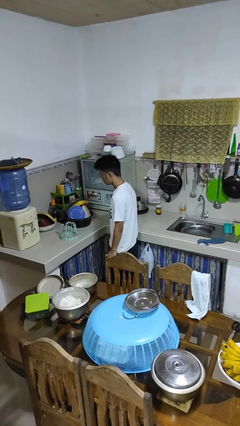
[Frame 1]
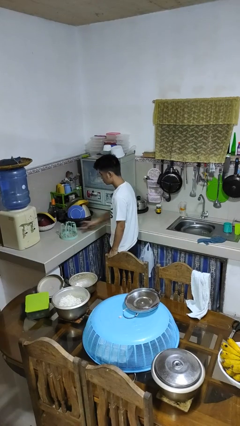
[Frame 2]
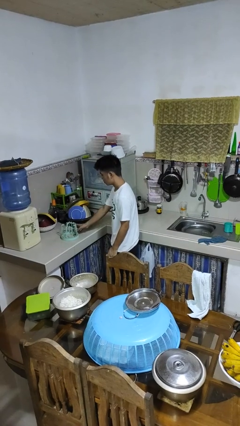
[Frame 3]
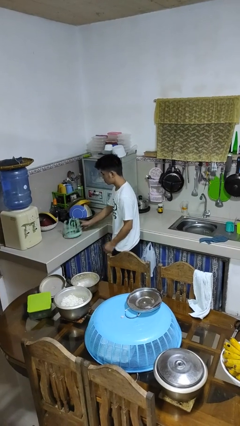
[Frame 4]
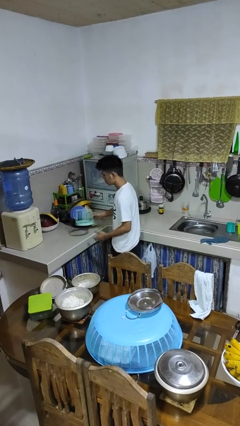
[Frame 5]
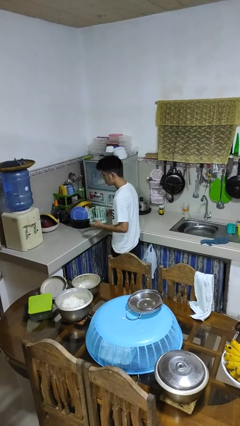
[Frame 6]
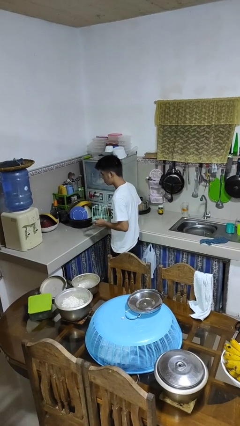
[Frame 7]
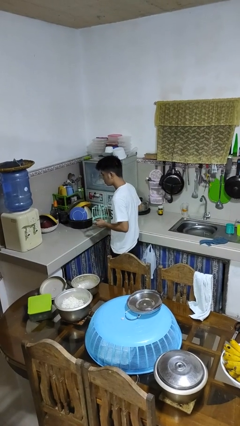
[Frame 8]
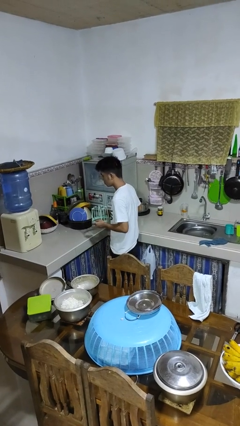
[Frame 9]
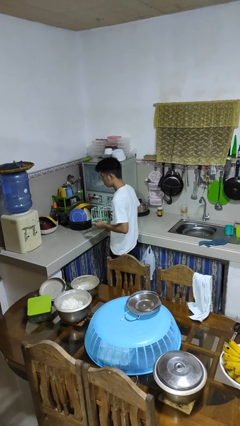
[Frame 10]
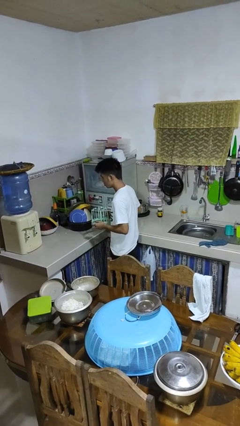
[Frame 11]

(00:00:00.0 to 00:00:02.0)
person picks up object from countertop

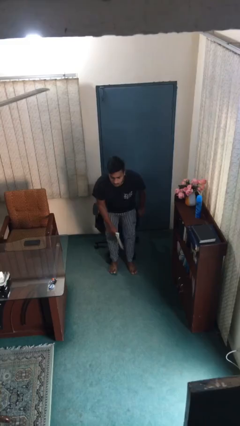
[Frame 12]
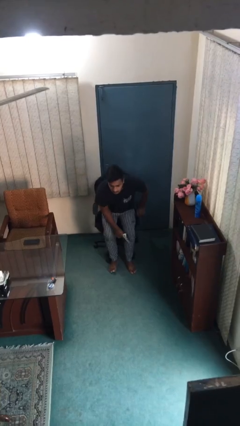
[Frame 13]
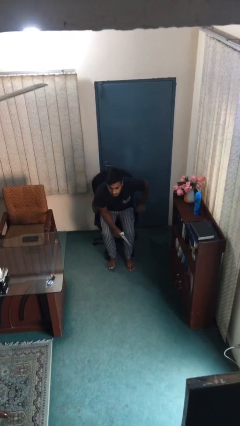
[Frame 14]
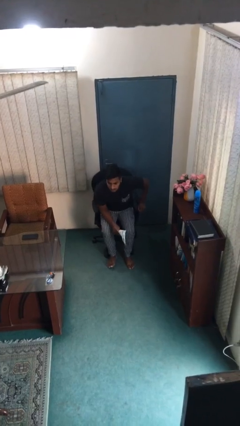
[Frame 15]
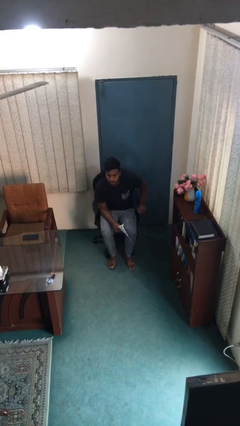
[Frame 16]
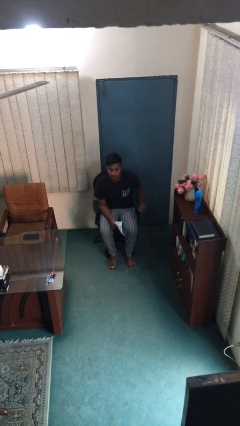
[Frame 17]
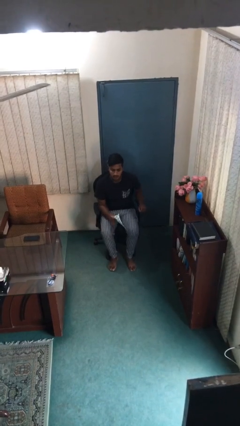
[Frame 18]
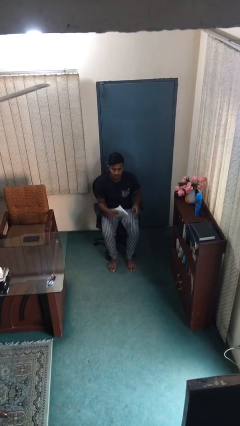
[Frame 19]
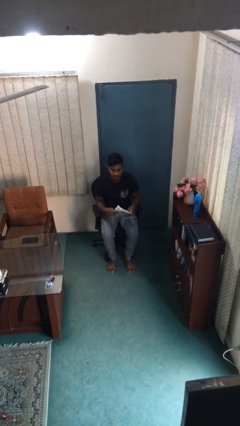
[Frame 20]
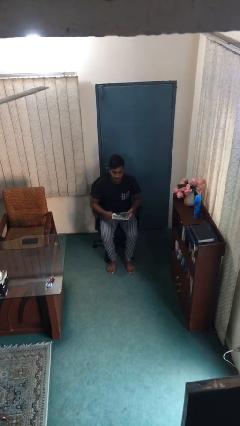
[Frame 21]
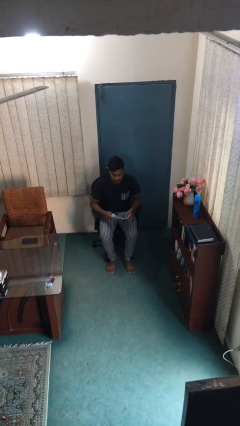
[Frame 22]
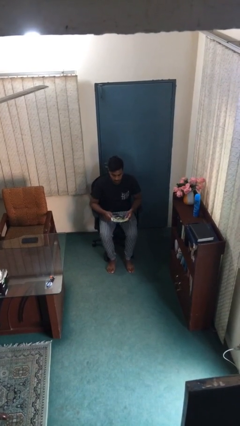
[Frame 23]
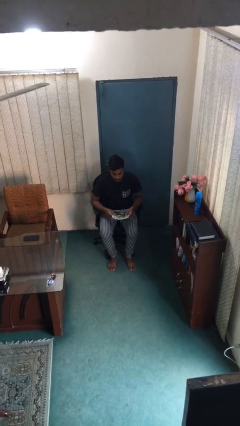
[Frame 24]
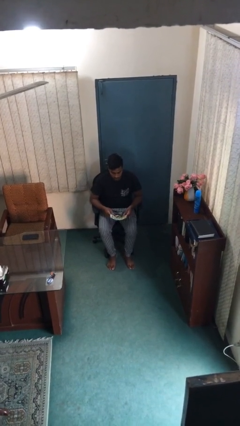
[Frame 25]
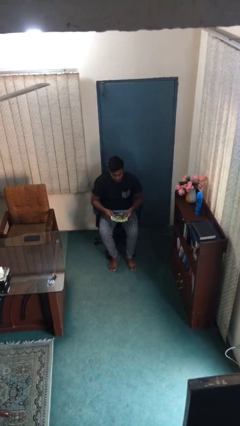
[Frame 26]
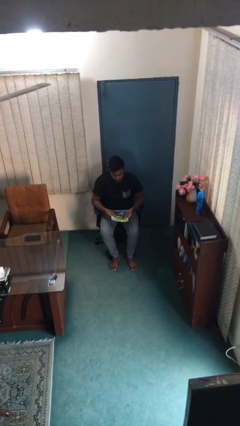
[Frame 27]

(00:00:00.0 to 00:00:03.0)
person sits down

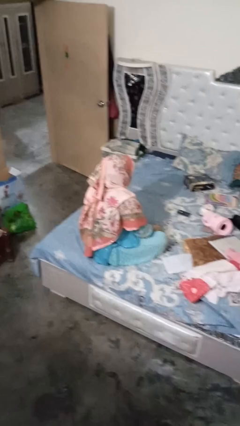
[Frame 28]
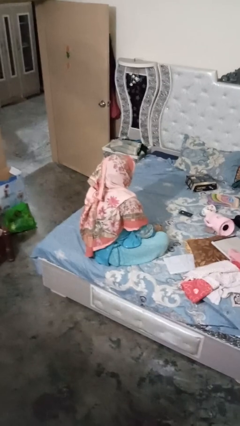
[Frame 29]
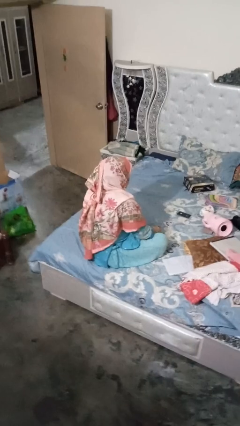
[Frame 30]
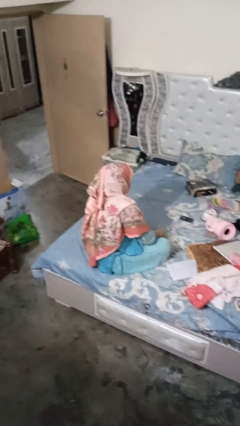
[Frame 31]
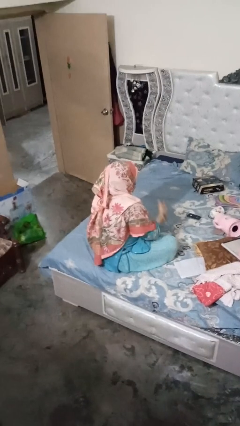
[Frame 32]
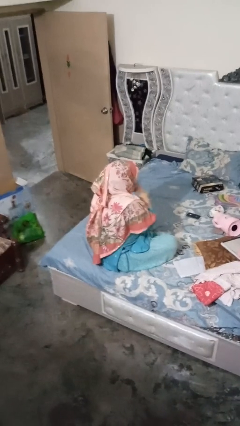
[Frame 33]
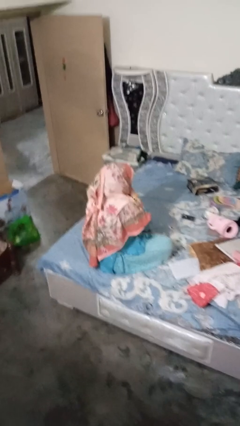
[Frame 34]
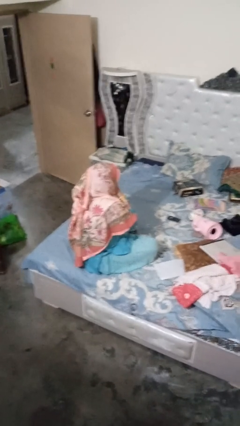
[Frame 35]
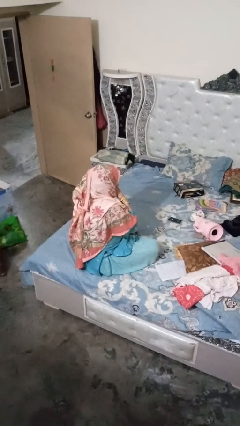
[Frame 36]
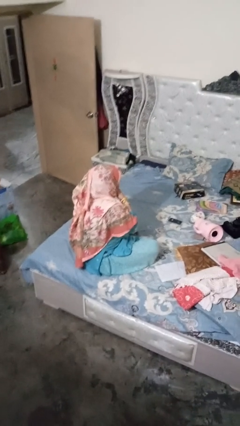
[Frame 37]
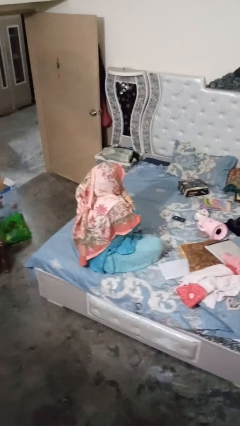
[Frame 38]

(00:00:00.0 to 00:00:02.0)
person strokes chin

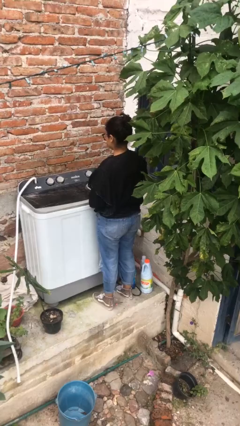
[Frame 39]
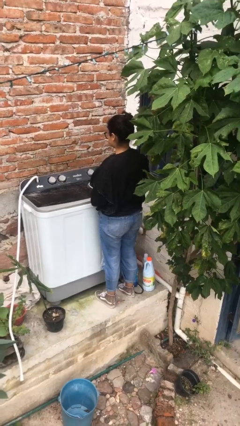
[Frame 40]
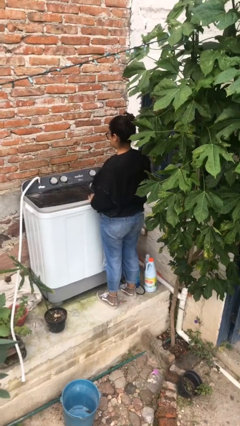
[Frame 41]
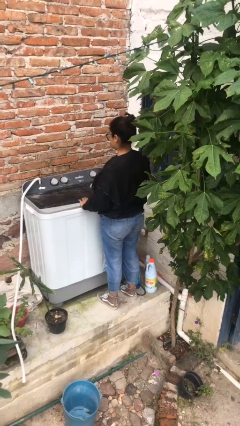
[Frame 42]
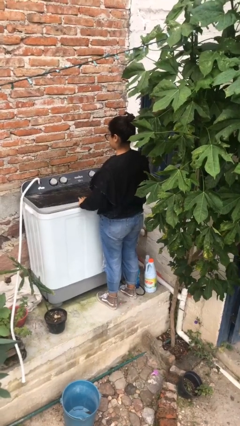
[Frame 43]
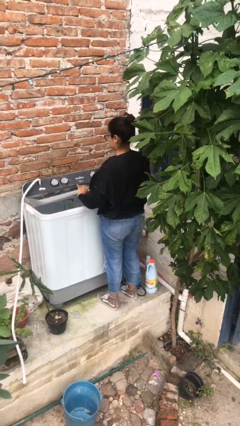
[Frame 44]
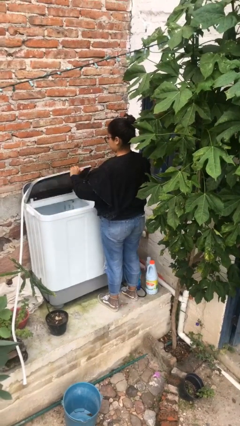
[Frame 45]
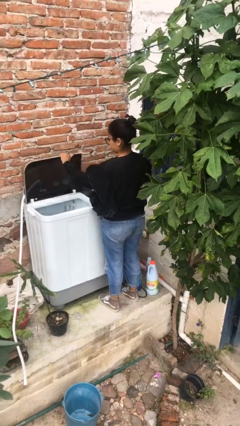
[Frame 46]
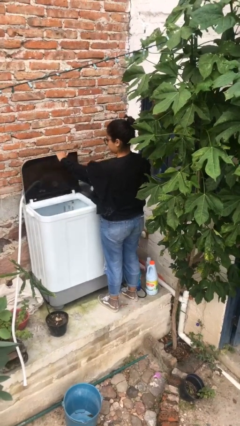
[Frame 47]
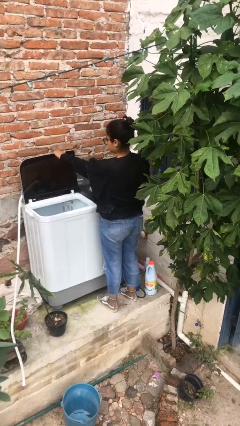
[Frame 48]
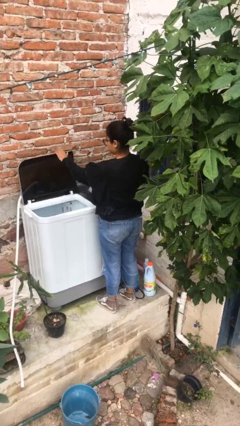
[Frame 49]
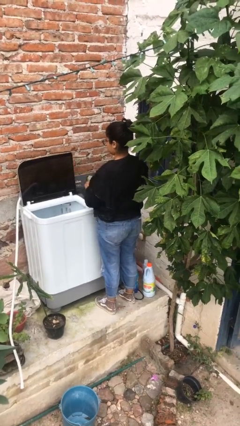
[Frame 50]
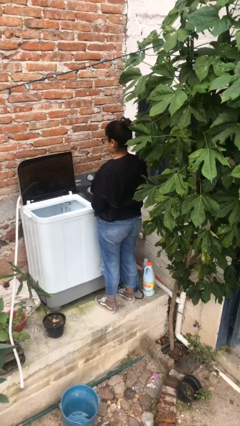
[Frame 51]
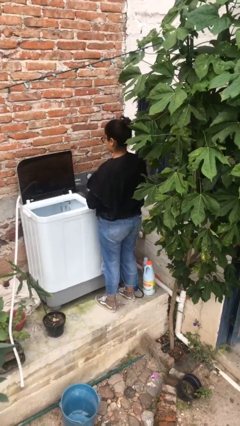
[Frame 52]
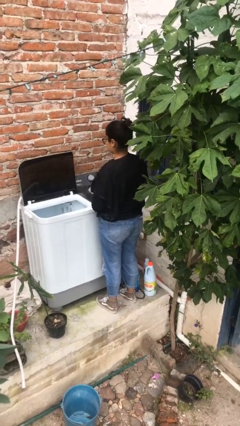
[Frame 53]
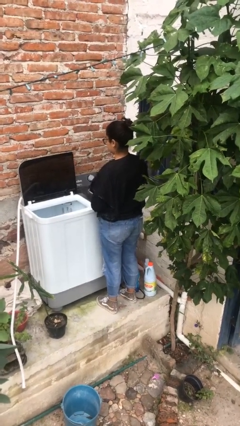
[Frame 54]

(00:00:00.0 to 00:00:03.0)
person opens clothes washer

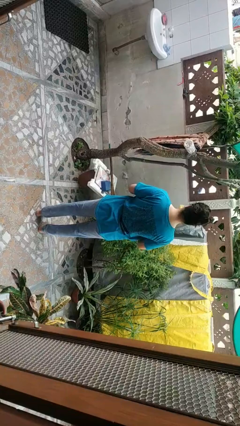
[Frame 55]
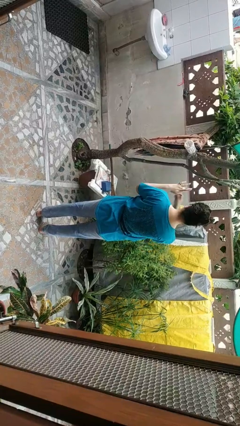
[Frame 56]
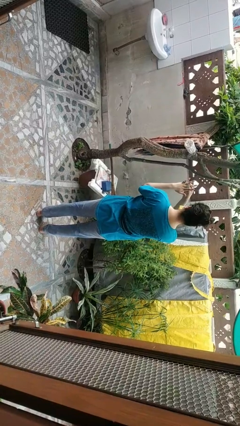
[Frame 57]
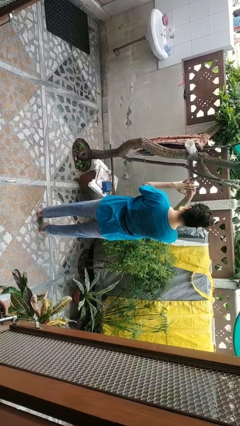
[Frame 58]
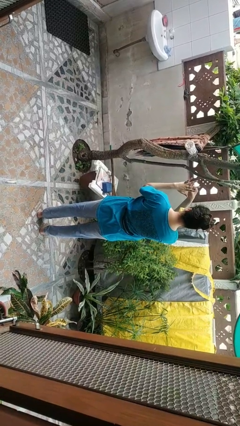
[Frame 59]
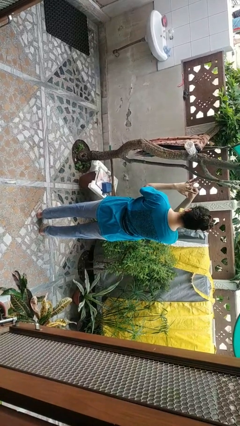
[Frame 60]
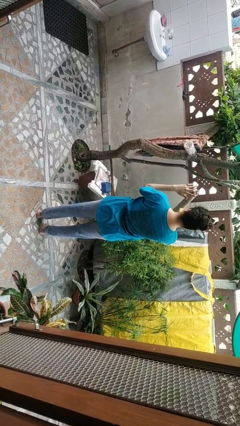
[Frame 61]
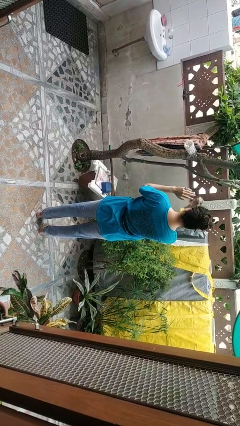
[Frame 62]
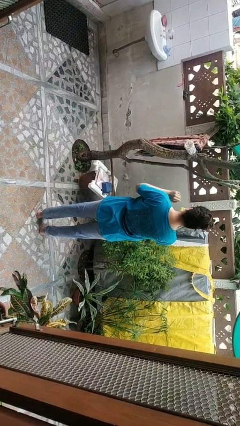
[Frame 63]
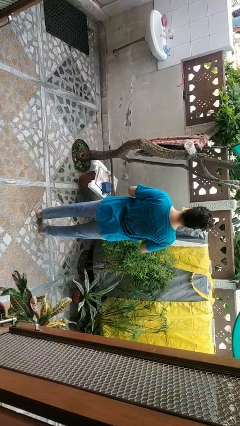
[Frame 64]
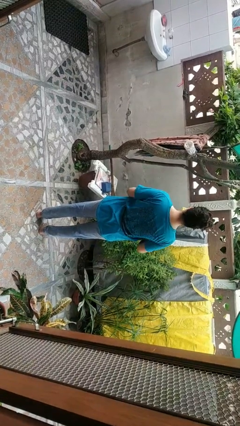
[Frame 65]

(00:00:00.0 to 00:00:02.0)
person takes off ring

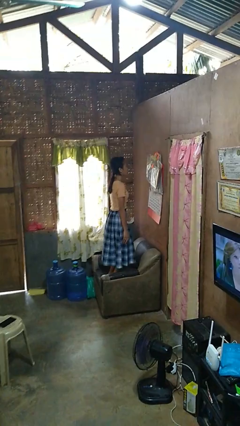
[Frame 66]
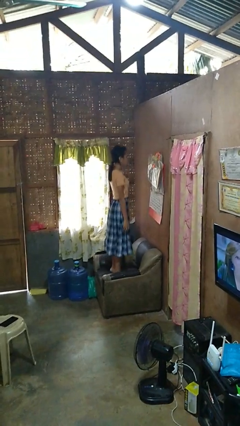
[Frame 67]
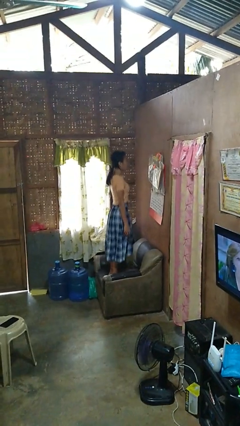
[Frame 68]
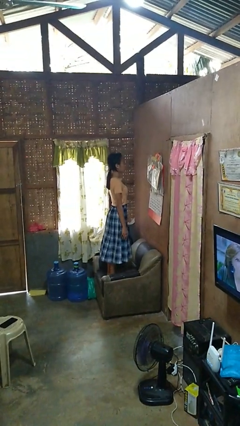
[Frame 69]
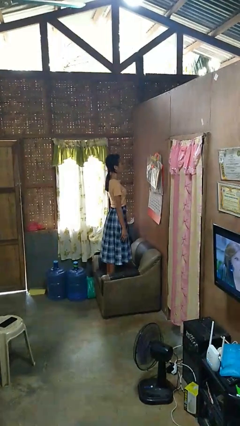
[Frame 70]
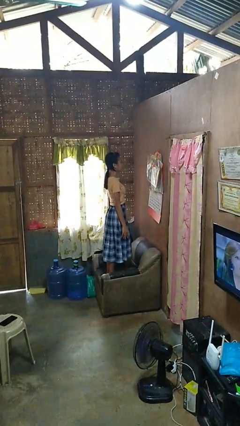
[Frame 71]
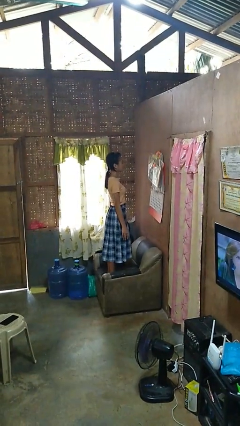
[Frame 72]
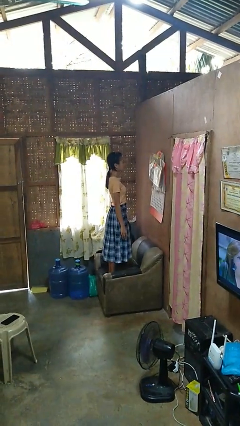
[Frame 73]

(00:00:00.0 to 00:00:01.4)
person jumps on couch

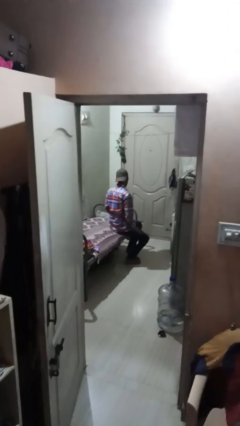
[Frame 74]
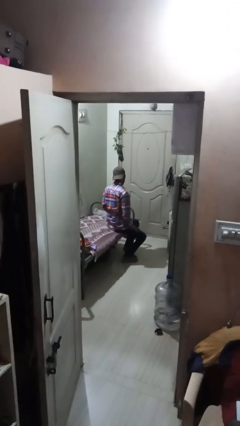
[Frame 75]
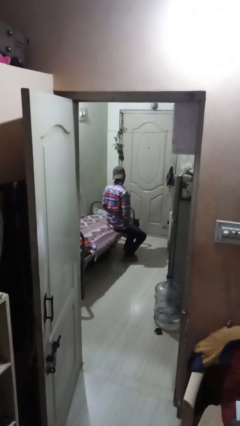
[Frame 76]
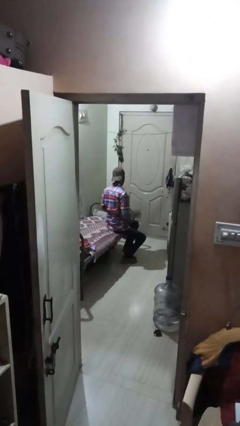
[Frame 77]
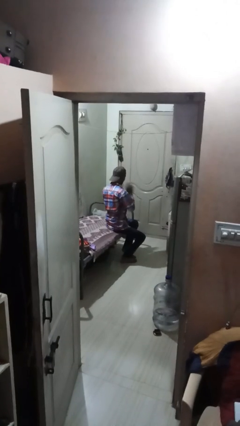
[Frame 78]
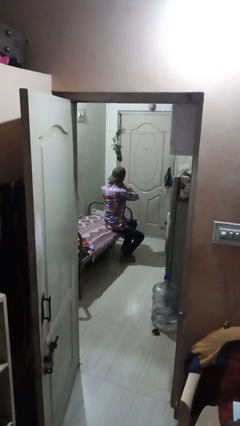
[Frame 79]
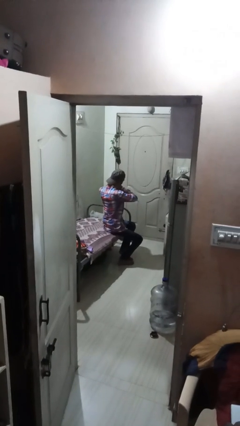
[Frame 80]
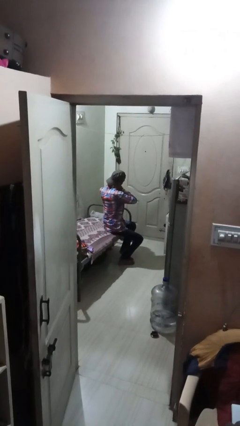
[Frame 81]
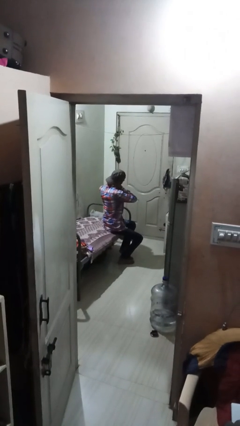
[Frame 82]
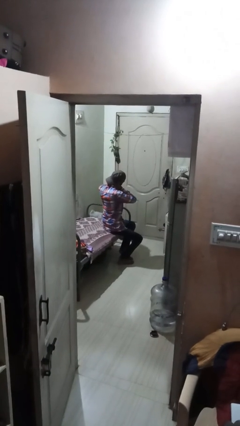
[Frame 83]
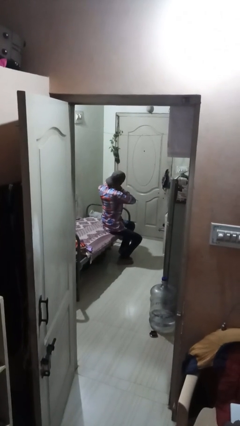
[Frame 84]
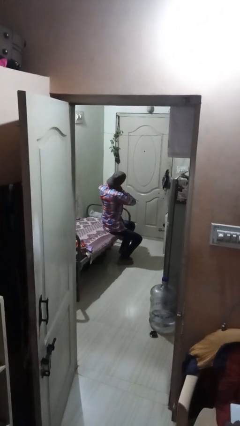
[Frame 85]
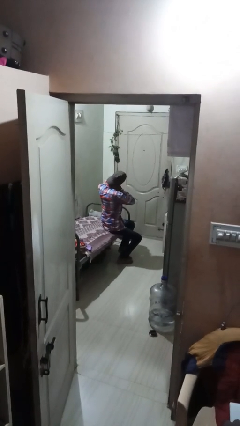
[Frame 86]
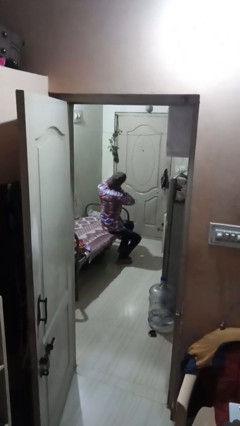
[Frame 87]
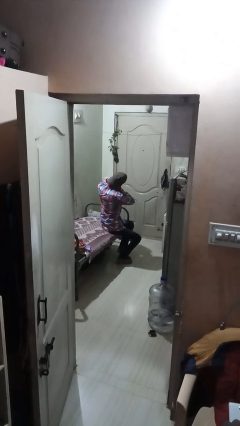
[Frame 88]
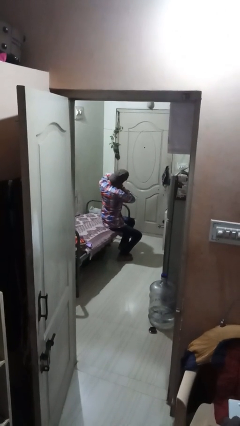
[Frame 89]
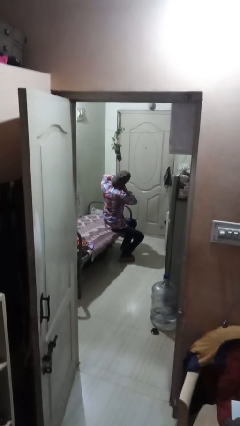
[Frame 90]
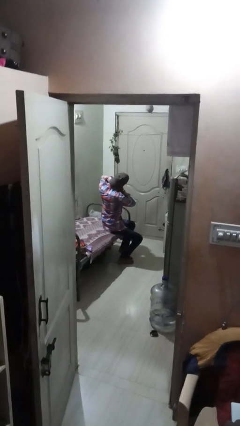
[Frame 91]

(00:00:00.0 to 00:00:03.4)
person rubs neck

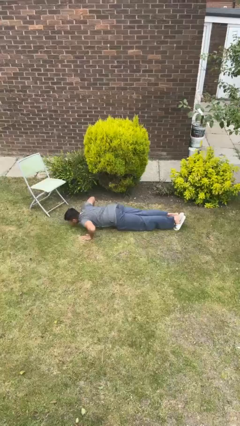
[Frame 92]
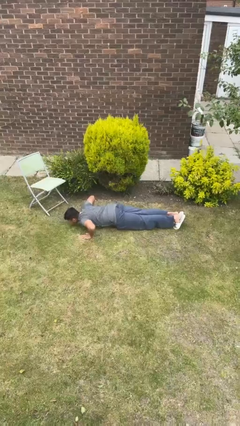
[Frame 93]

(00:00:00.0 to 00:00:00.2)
person exercises with pushup
